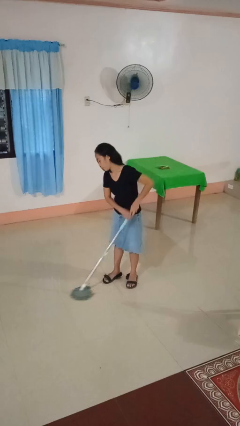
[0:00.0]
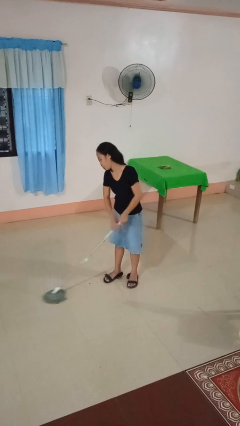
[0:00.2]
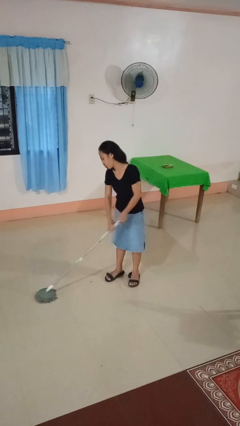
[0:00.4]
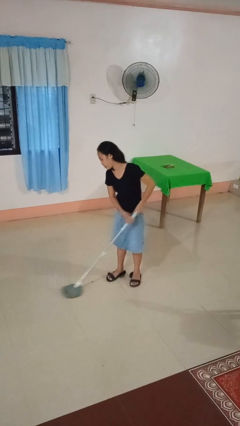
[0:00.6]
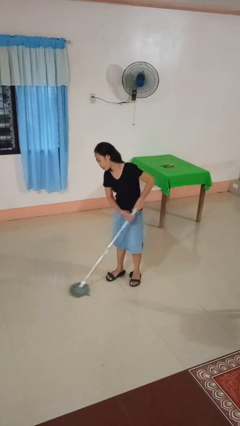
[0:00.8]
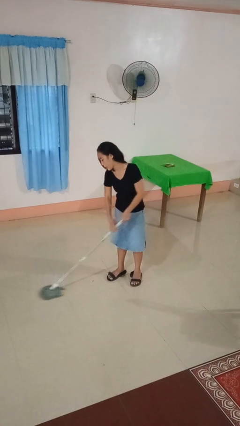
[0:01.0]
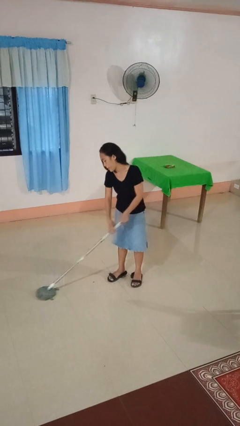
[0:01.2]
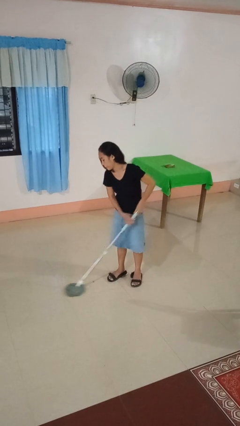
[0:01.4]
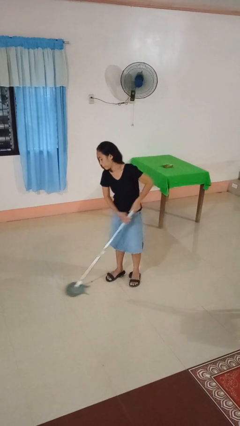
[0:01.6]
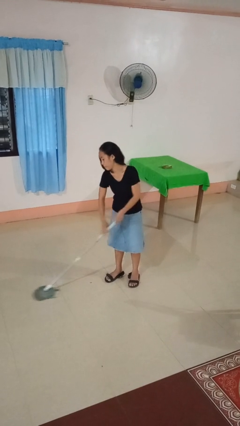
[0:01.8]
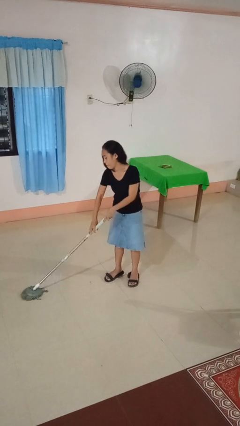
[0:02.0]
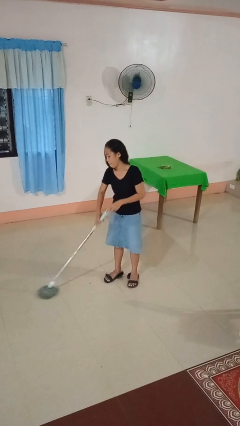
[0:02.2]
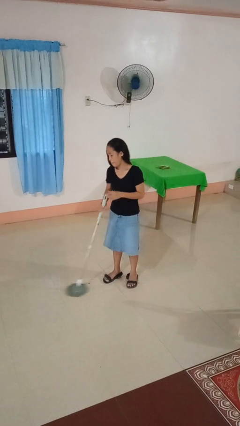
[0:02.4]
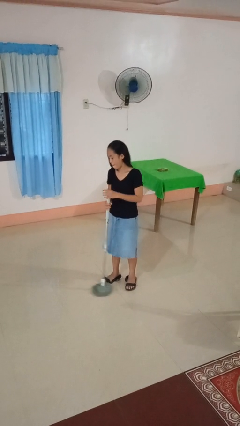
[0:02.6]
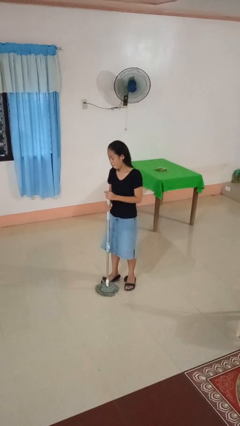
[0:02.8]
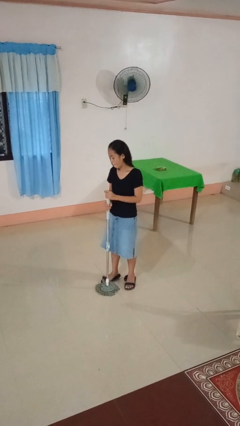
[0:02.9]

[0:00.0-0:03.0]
person mops

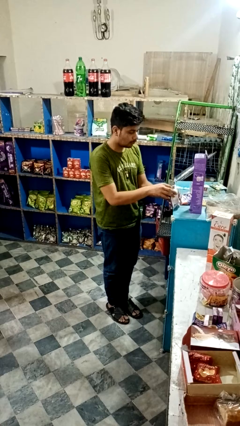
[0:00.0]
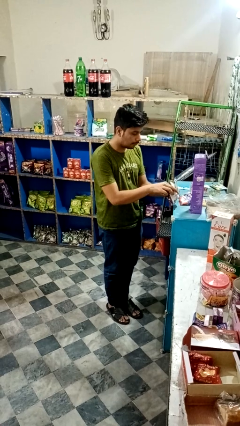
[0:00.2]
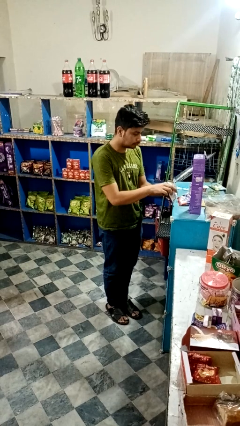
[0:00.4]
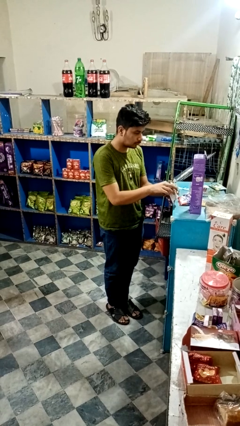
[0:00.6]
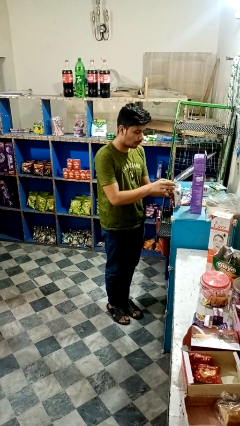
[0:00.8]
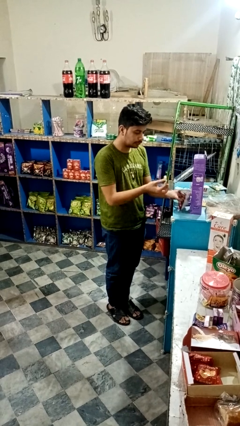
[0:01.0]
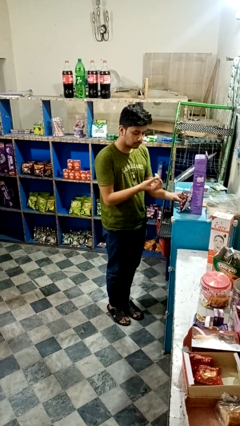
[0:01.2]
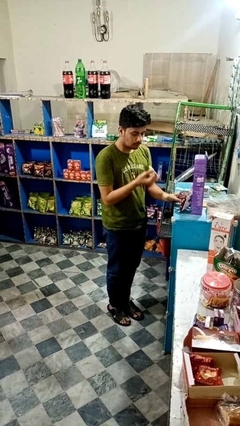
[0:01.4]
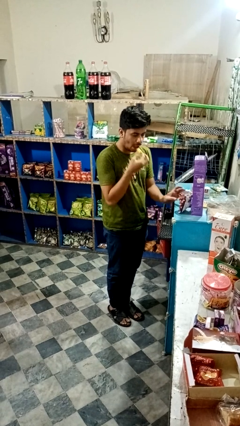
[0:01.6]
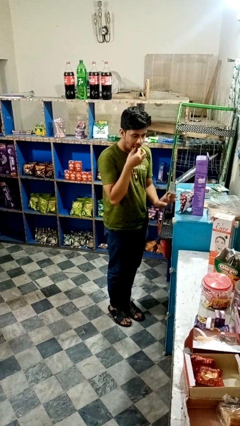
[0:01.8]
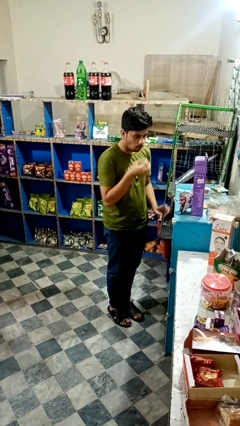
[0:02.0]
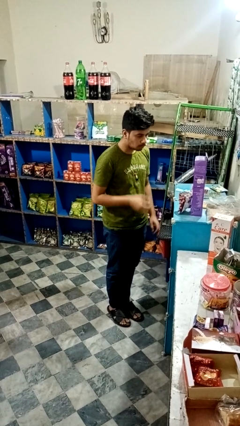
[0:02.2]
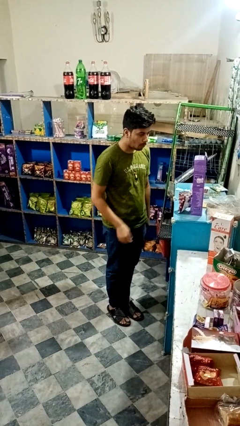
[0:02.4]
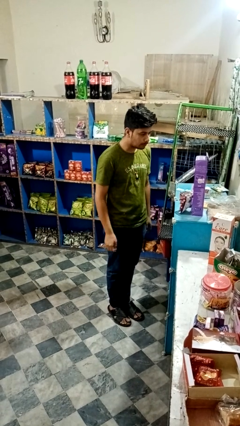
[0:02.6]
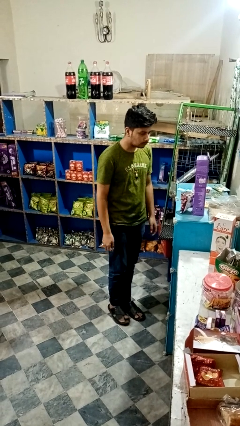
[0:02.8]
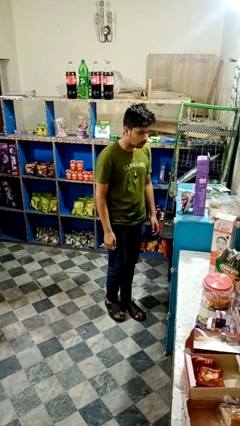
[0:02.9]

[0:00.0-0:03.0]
person eats snack from bag

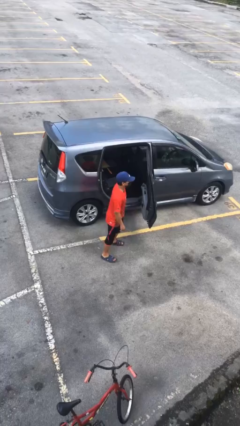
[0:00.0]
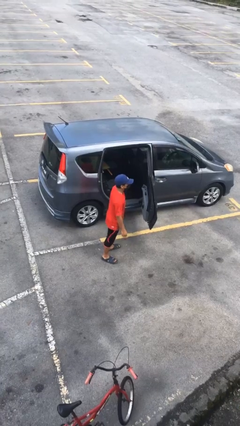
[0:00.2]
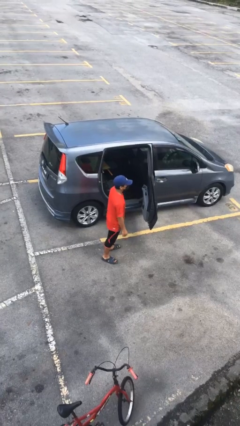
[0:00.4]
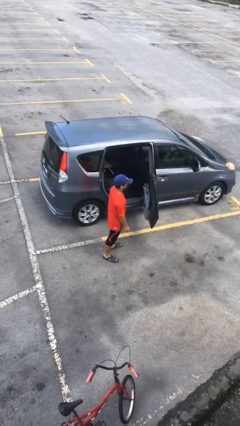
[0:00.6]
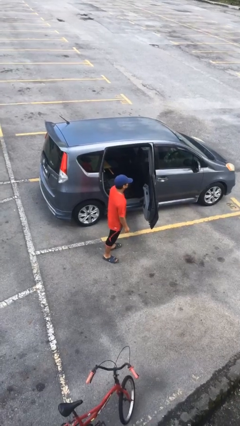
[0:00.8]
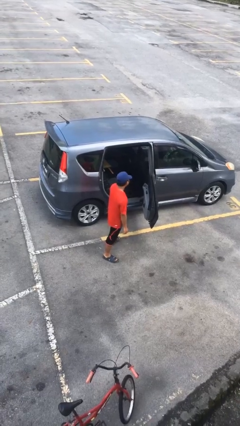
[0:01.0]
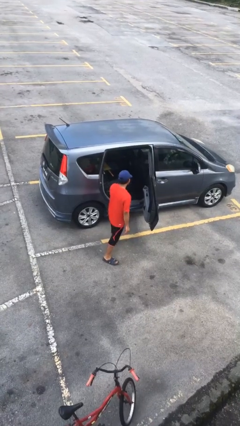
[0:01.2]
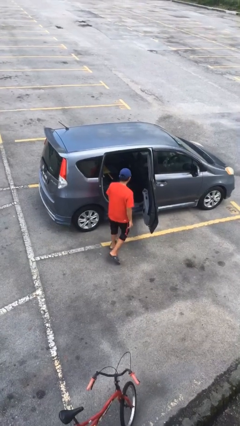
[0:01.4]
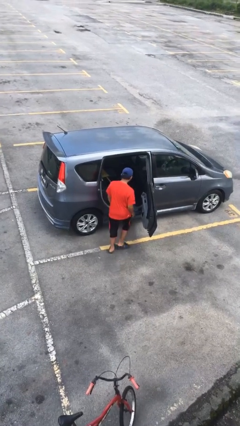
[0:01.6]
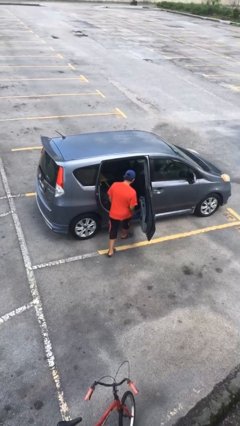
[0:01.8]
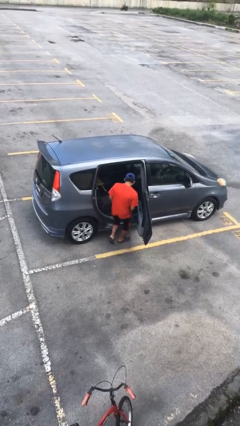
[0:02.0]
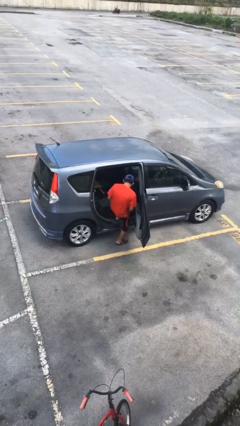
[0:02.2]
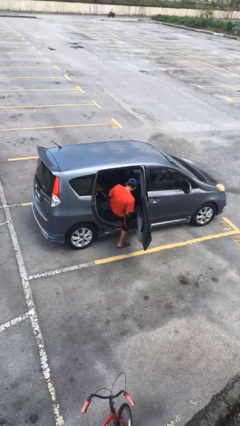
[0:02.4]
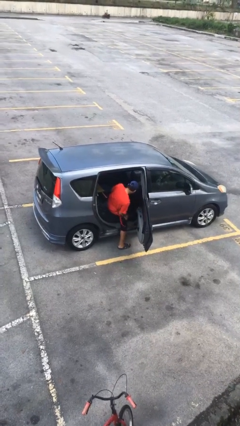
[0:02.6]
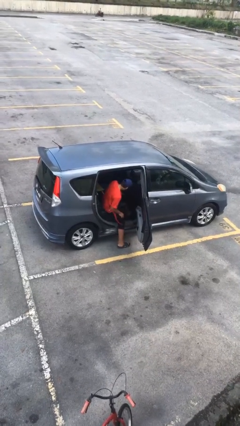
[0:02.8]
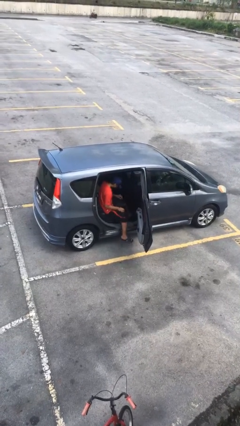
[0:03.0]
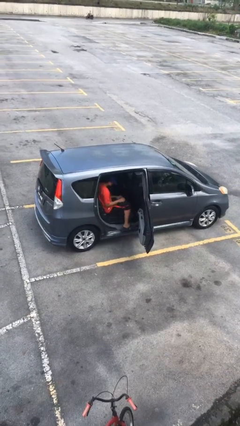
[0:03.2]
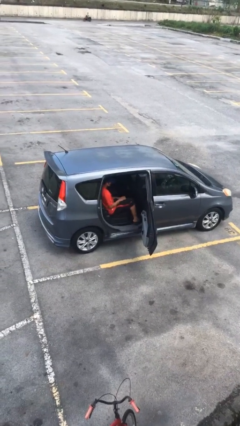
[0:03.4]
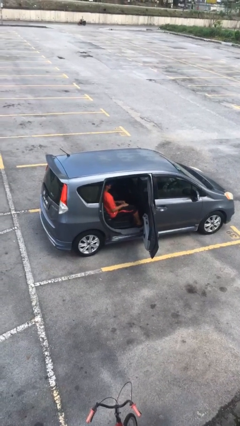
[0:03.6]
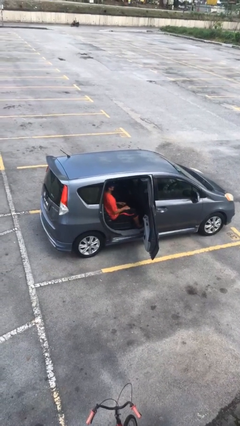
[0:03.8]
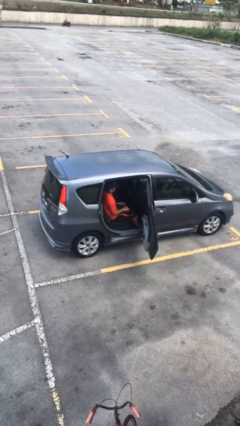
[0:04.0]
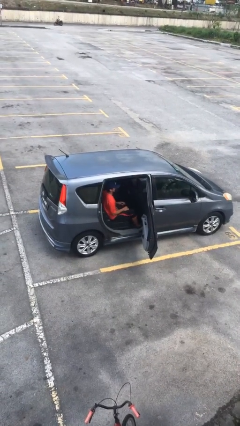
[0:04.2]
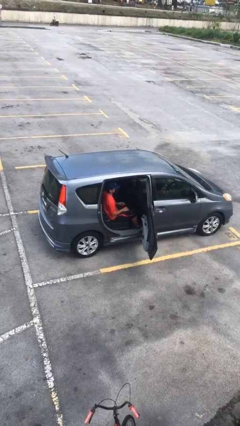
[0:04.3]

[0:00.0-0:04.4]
person enters car

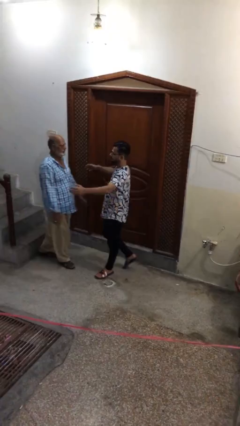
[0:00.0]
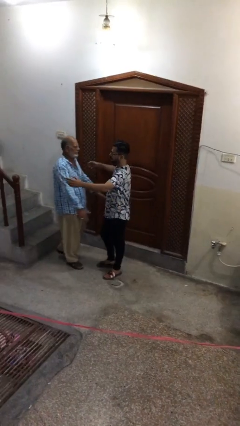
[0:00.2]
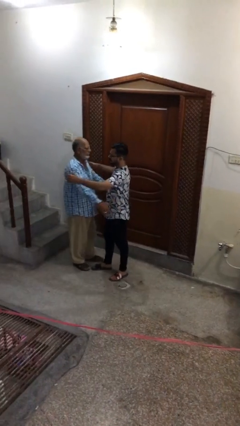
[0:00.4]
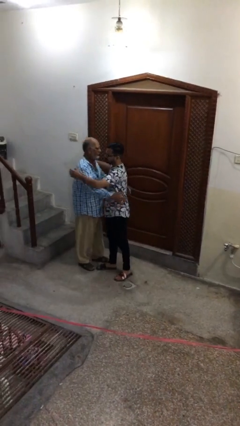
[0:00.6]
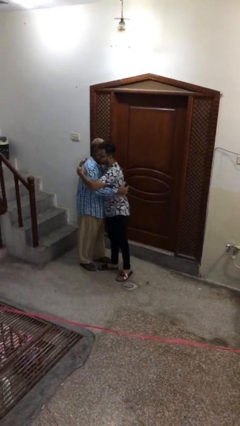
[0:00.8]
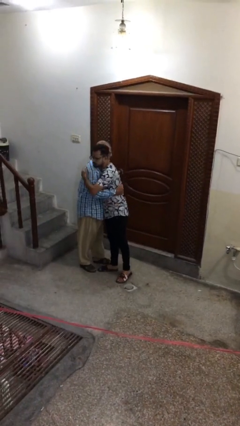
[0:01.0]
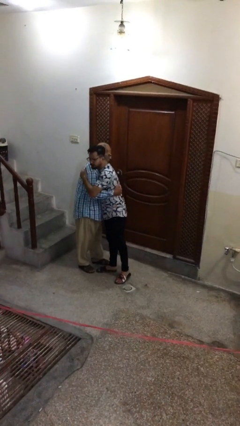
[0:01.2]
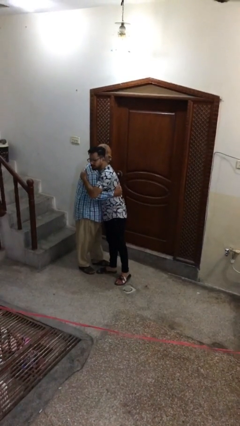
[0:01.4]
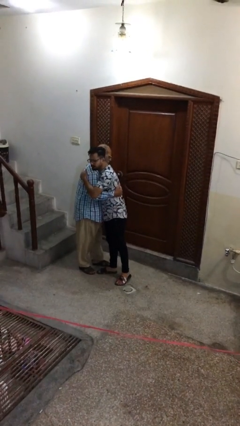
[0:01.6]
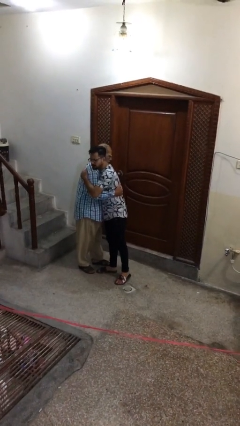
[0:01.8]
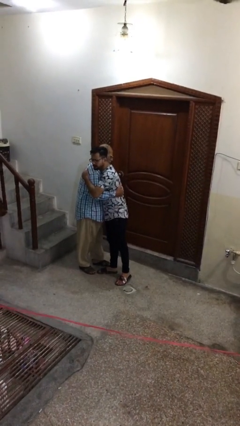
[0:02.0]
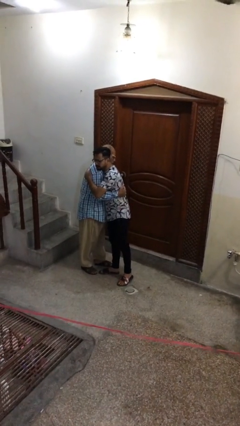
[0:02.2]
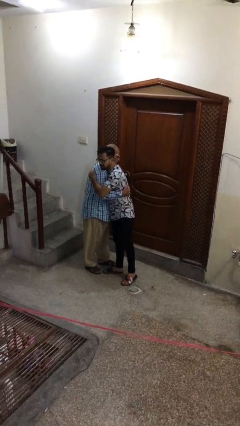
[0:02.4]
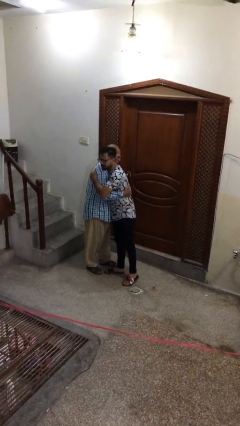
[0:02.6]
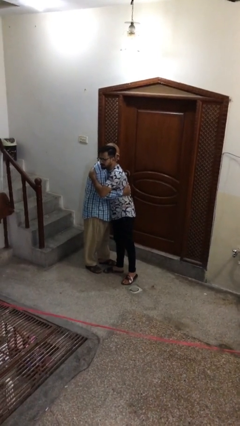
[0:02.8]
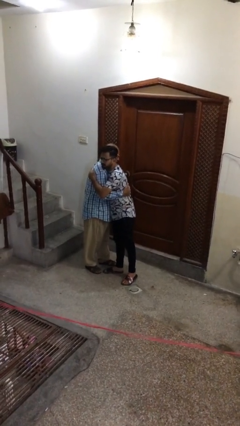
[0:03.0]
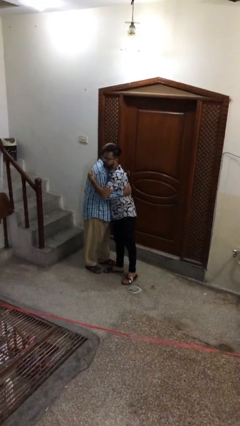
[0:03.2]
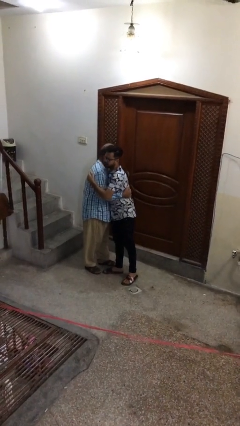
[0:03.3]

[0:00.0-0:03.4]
person embraces person

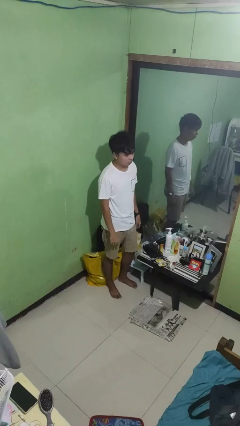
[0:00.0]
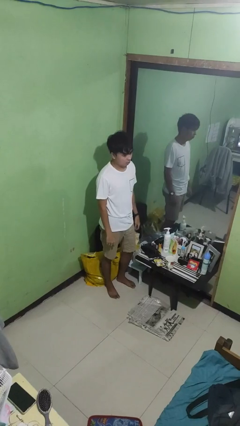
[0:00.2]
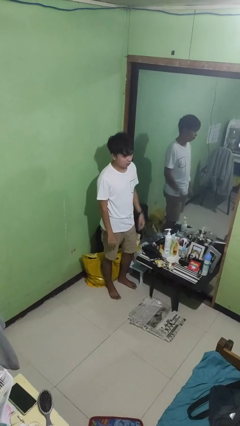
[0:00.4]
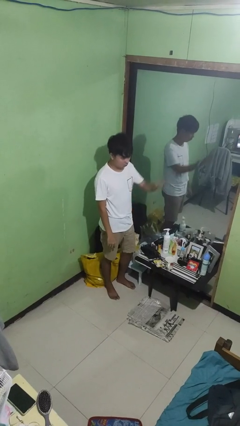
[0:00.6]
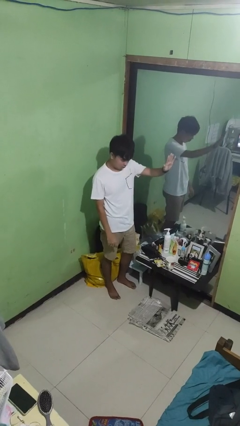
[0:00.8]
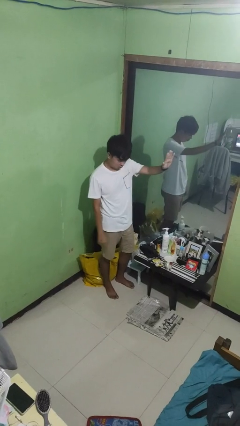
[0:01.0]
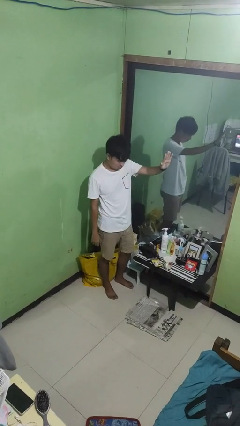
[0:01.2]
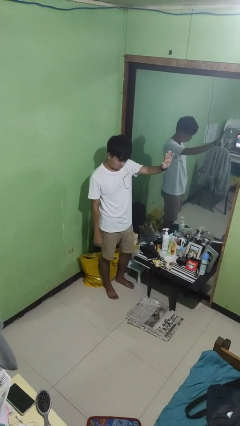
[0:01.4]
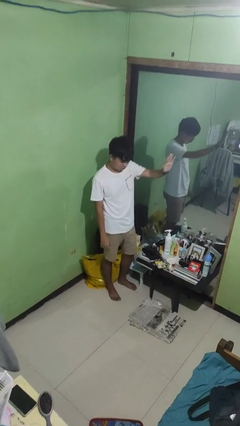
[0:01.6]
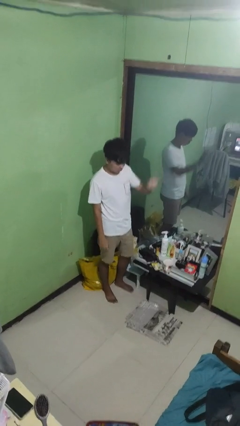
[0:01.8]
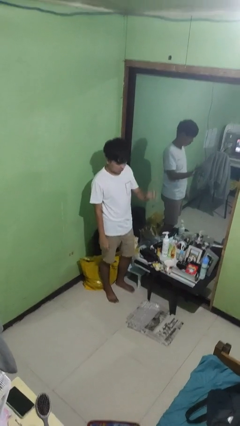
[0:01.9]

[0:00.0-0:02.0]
person gestures stop

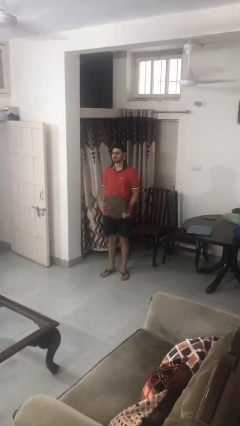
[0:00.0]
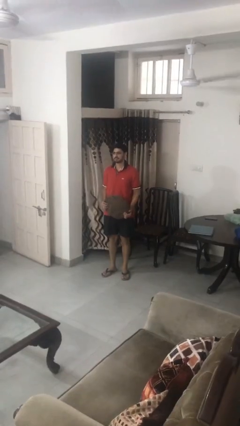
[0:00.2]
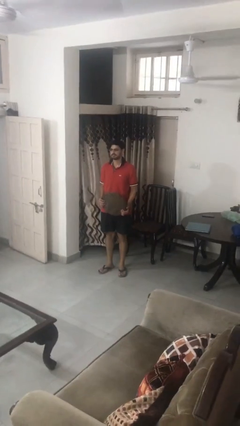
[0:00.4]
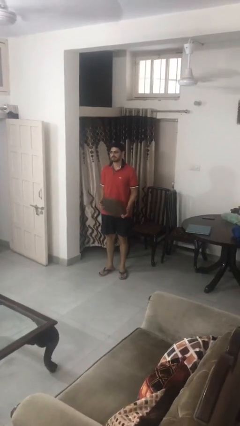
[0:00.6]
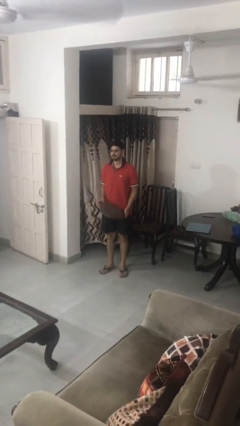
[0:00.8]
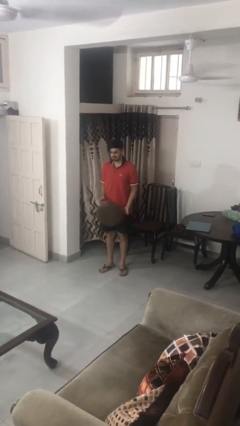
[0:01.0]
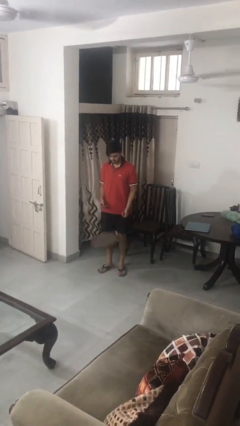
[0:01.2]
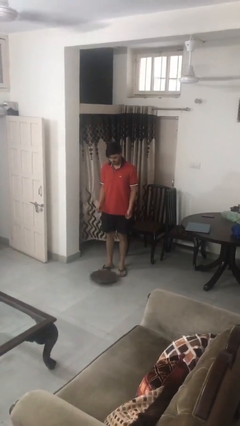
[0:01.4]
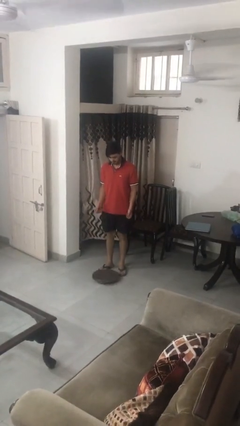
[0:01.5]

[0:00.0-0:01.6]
person drops object
